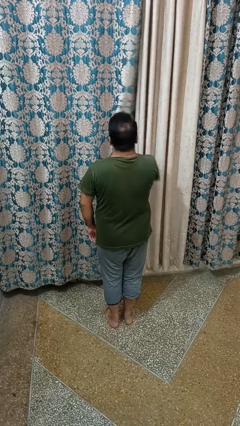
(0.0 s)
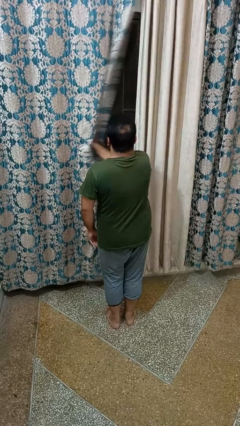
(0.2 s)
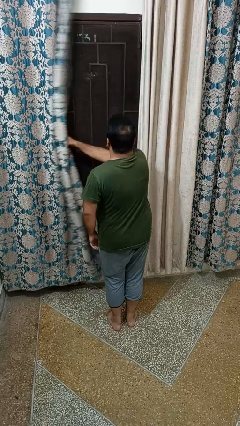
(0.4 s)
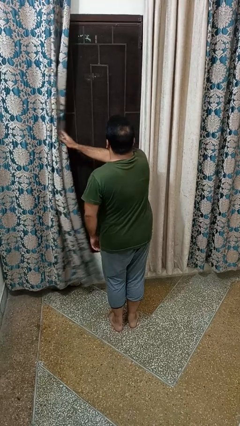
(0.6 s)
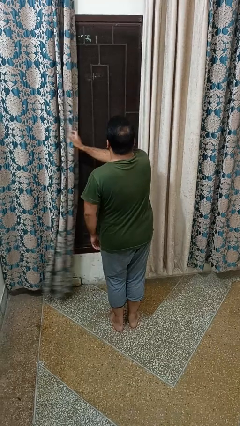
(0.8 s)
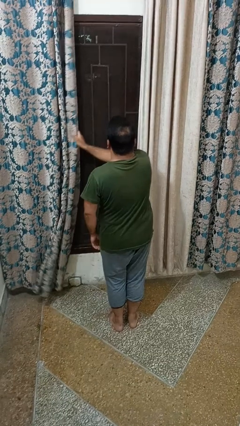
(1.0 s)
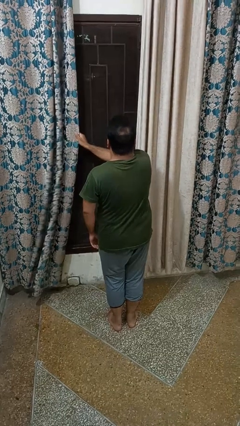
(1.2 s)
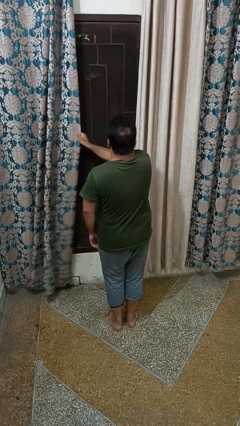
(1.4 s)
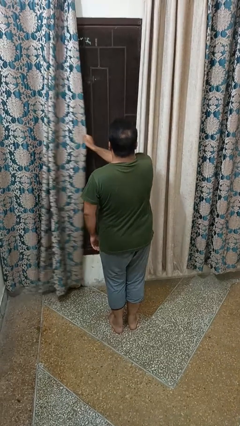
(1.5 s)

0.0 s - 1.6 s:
person opens curtains

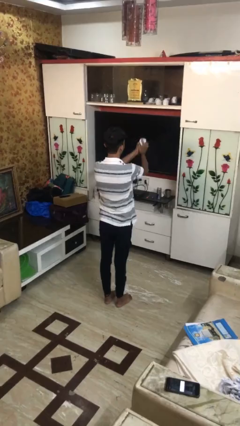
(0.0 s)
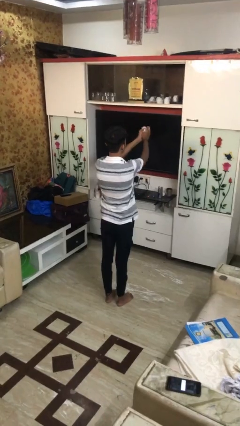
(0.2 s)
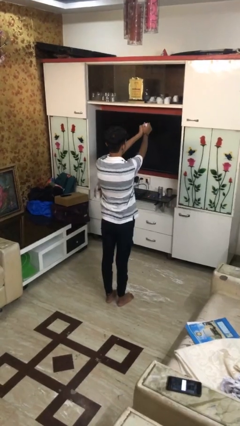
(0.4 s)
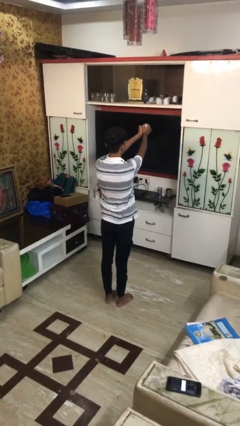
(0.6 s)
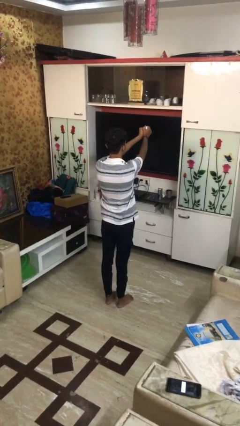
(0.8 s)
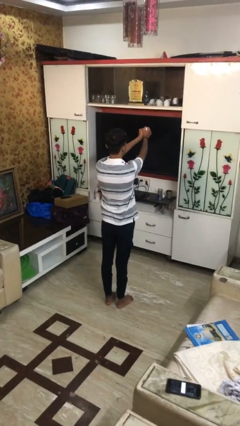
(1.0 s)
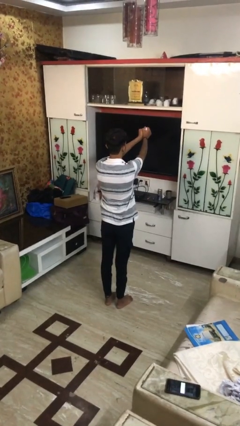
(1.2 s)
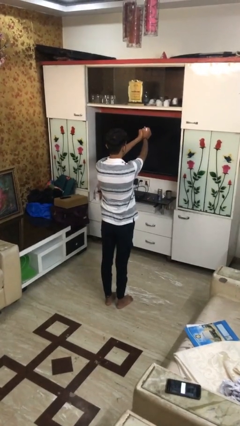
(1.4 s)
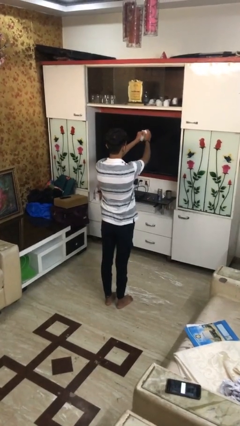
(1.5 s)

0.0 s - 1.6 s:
person crumples paper

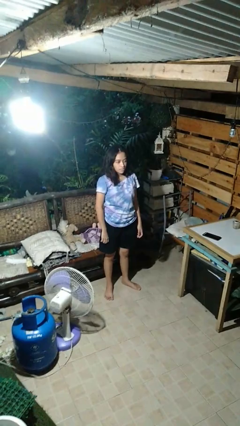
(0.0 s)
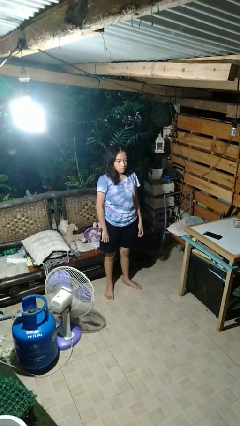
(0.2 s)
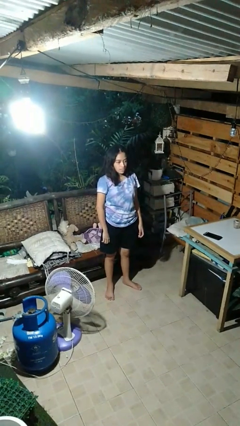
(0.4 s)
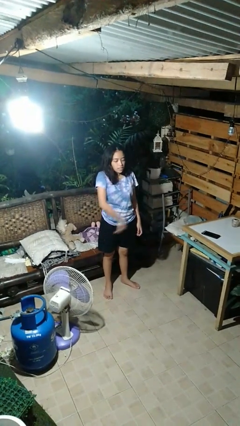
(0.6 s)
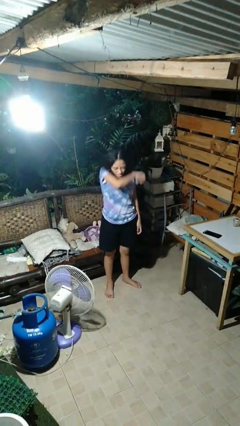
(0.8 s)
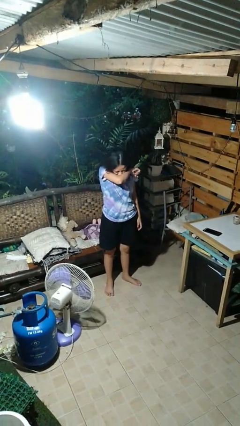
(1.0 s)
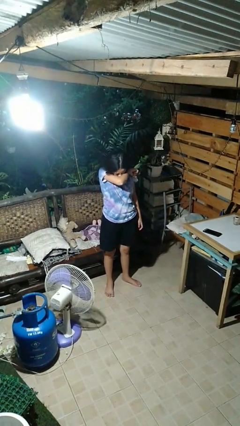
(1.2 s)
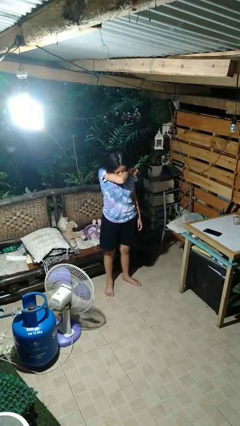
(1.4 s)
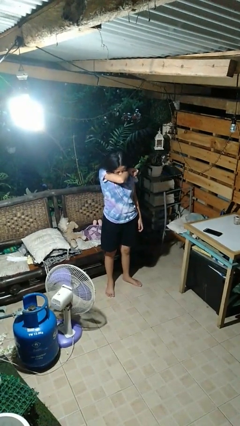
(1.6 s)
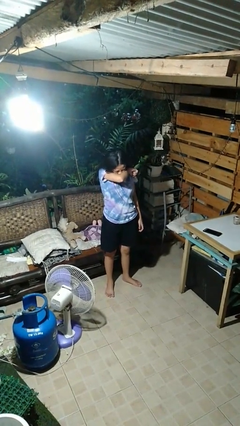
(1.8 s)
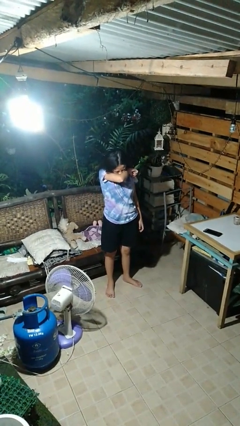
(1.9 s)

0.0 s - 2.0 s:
person sneezes into arm

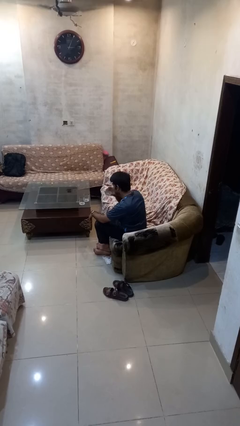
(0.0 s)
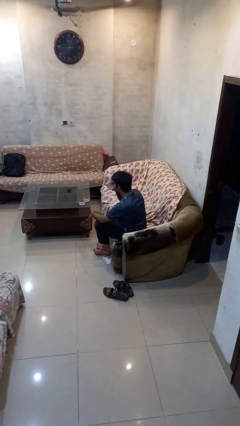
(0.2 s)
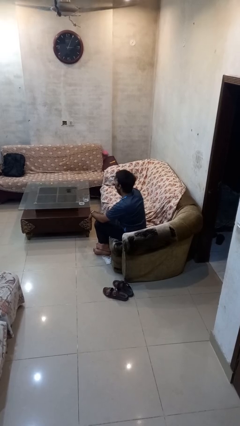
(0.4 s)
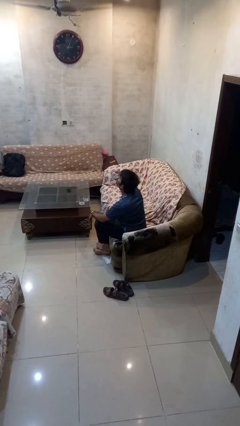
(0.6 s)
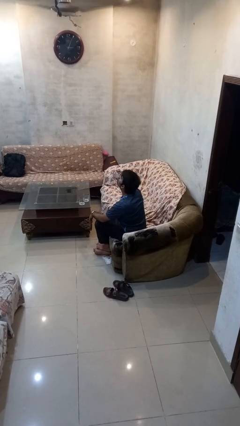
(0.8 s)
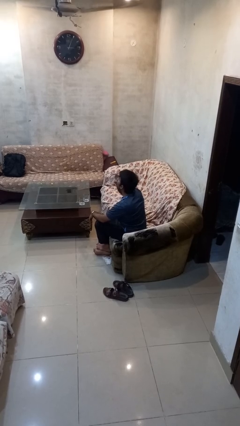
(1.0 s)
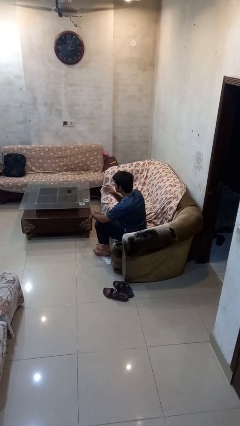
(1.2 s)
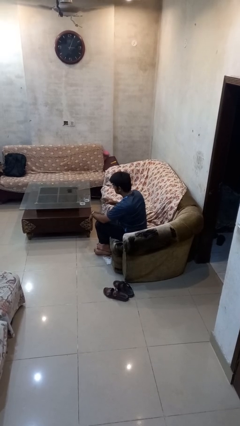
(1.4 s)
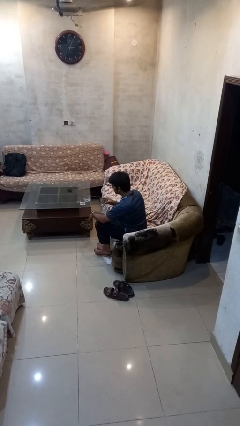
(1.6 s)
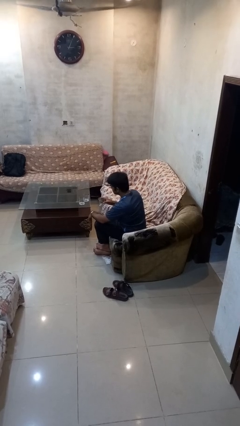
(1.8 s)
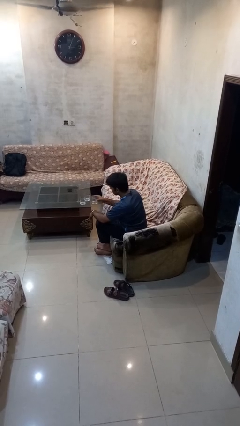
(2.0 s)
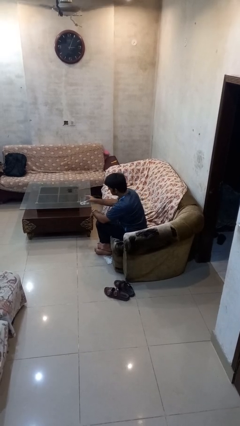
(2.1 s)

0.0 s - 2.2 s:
person drinks from shotglass

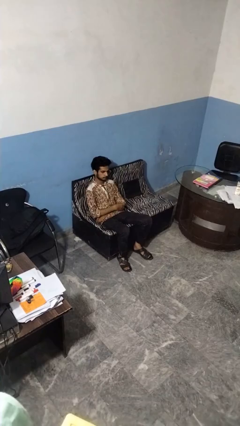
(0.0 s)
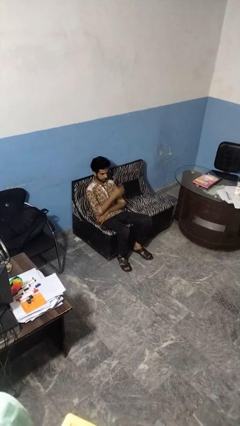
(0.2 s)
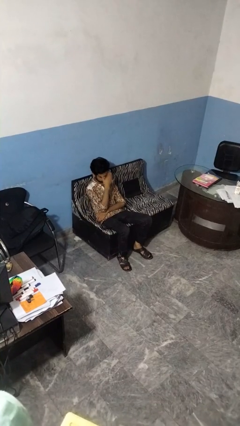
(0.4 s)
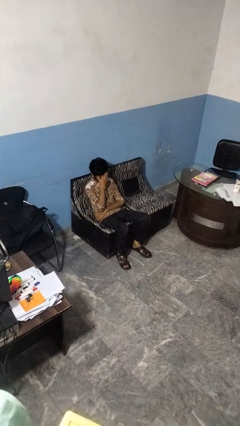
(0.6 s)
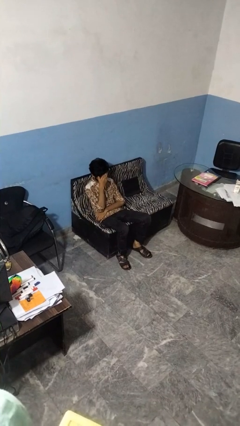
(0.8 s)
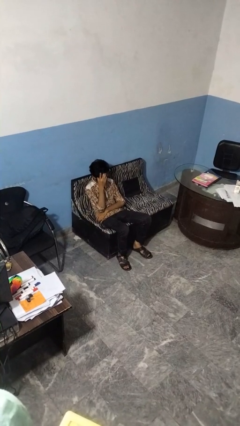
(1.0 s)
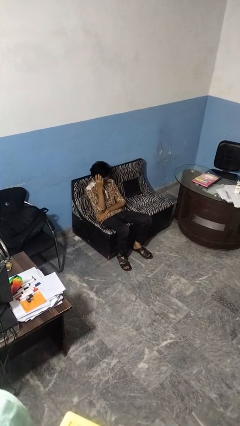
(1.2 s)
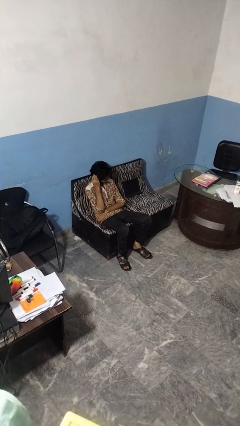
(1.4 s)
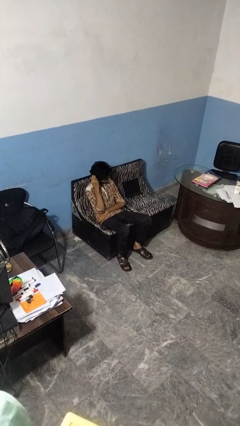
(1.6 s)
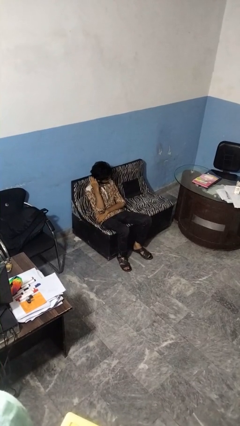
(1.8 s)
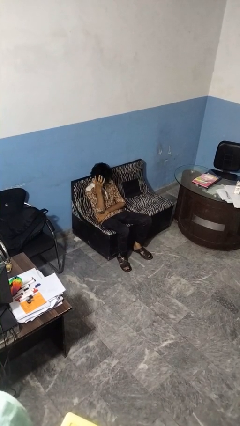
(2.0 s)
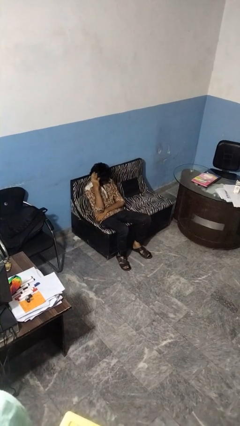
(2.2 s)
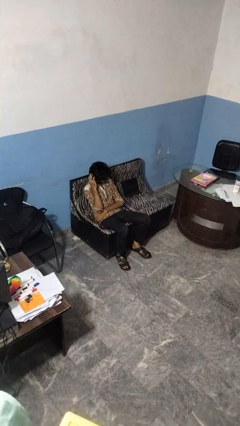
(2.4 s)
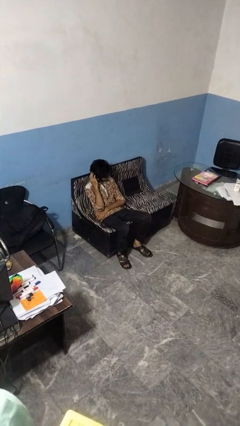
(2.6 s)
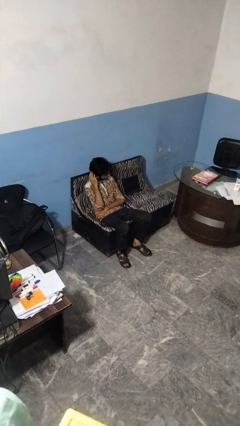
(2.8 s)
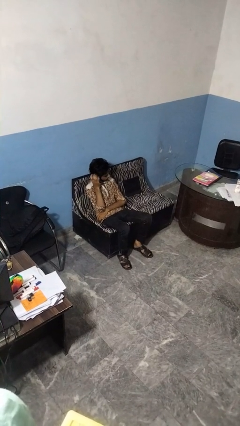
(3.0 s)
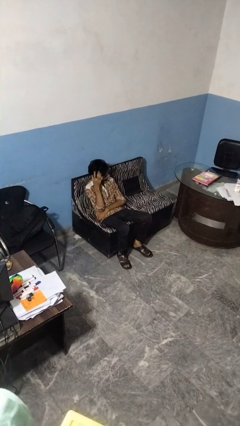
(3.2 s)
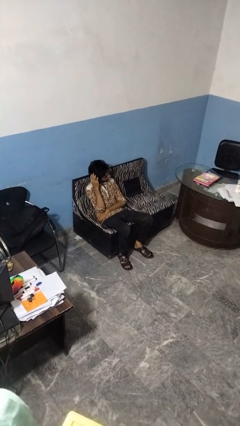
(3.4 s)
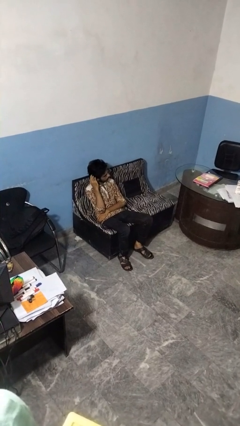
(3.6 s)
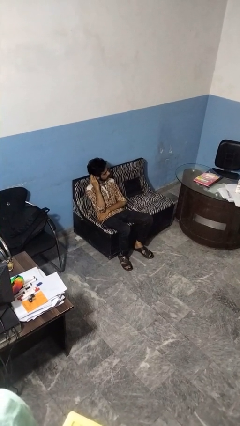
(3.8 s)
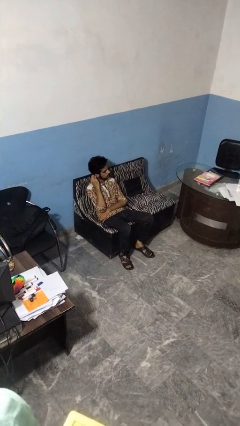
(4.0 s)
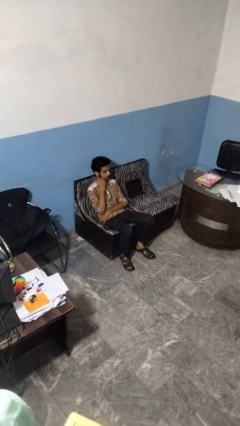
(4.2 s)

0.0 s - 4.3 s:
person strokes hair

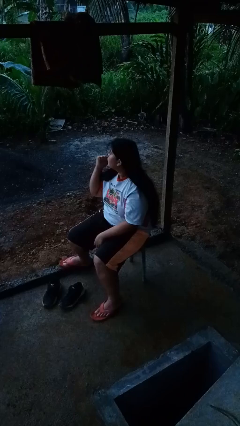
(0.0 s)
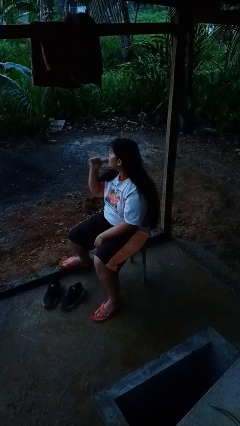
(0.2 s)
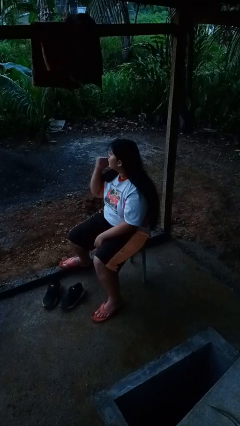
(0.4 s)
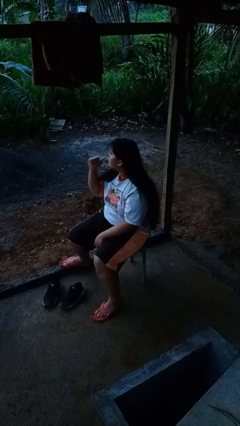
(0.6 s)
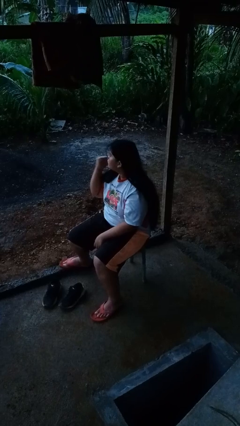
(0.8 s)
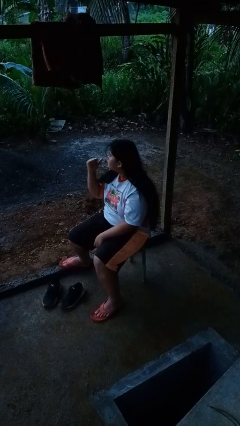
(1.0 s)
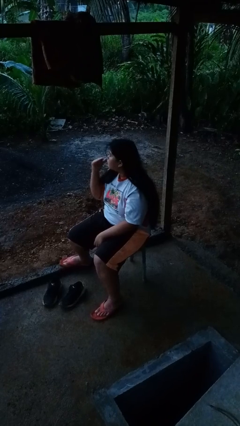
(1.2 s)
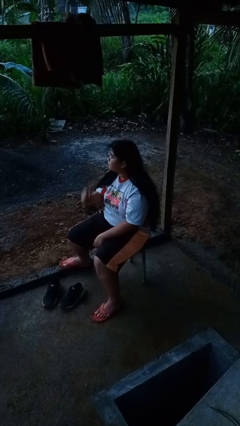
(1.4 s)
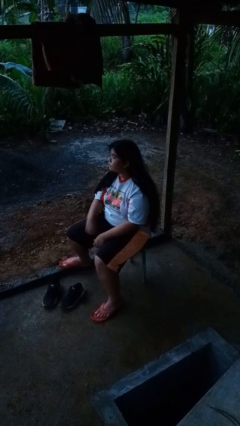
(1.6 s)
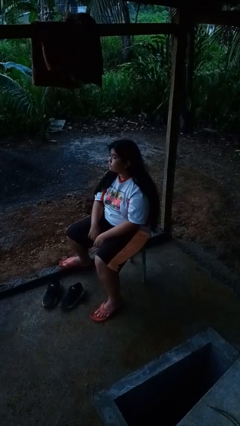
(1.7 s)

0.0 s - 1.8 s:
person gestures behind me

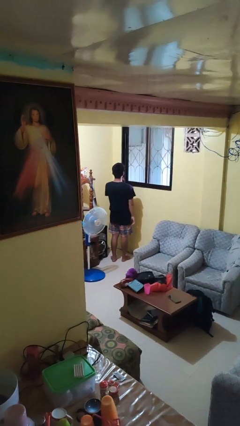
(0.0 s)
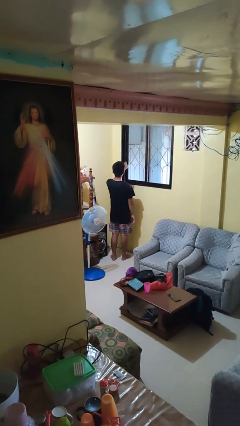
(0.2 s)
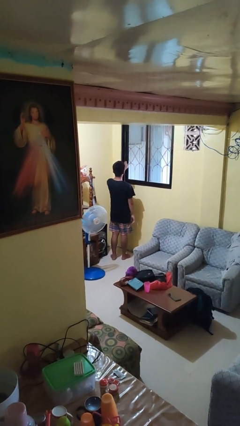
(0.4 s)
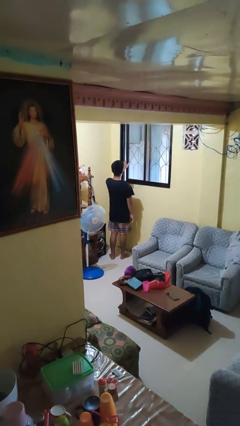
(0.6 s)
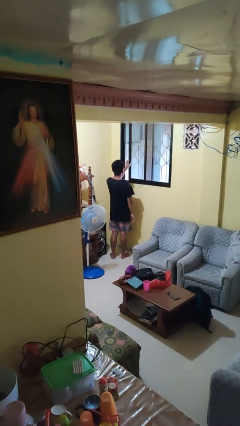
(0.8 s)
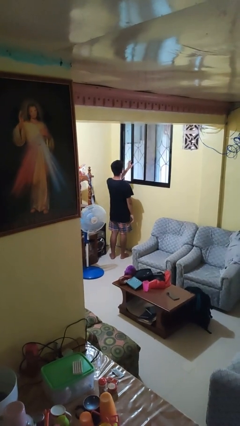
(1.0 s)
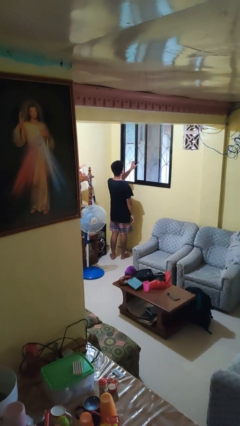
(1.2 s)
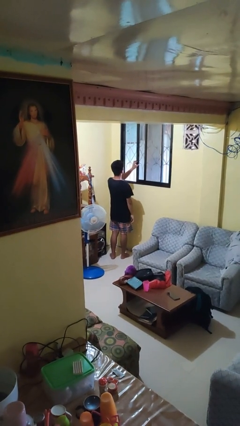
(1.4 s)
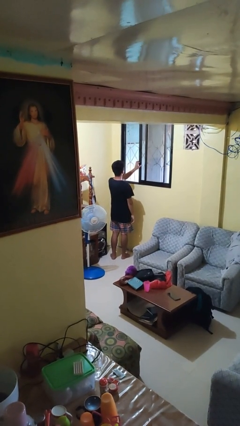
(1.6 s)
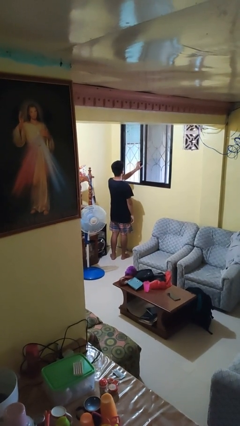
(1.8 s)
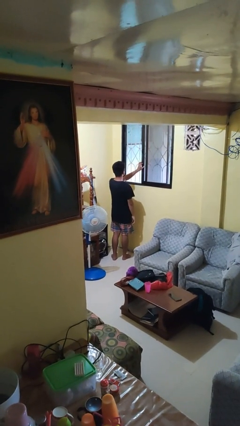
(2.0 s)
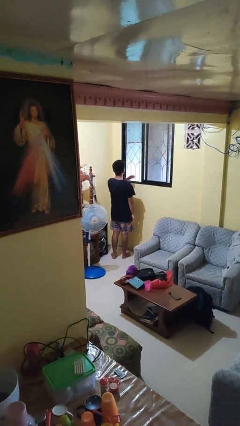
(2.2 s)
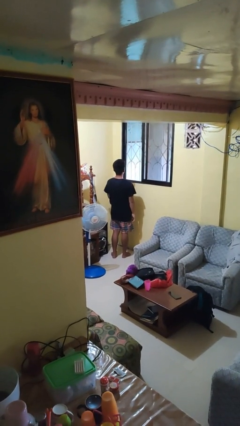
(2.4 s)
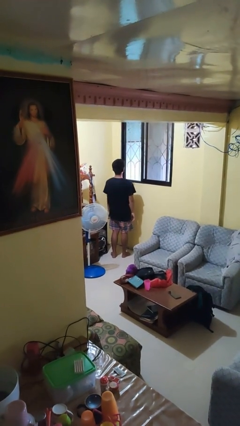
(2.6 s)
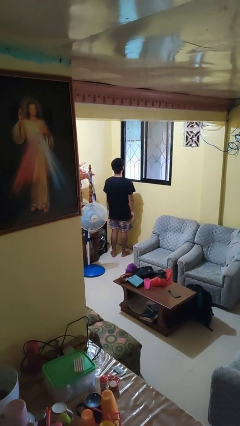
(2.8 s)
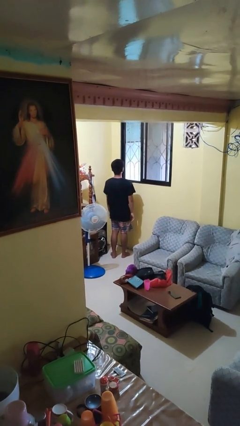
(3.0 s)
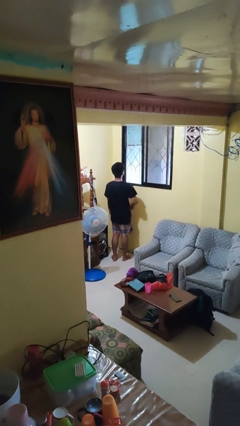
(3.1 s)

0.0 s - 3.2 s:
person opens home window
